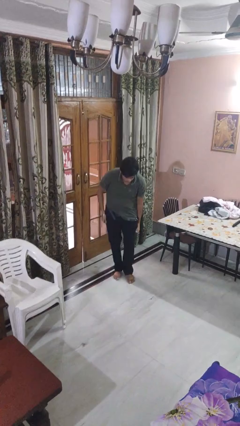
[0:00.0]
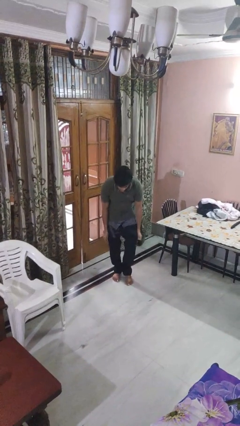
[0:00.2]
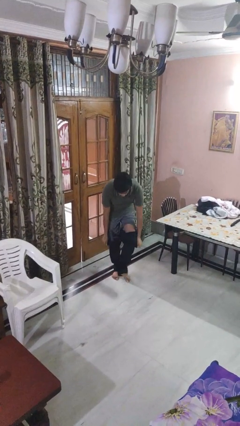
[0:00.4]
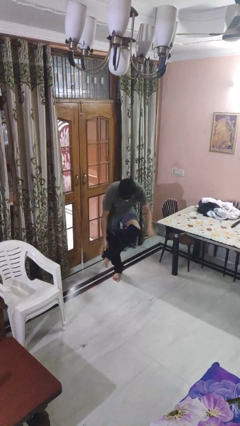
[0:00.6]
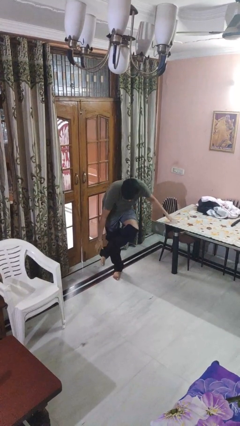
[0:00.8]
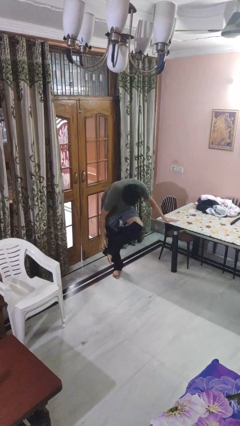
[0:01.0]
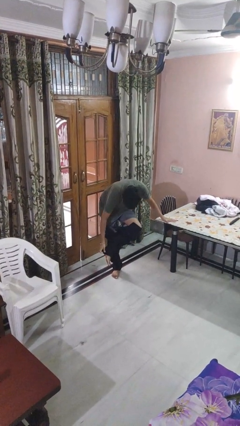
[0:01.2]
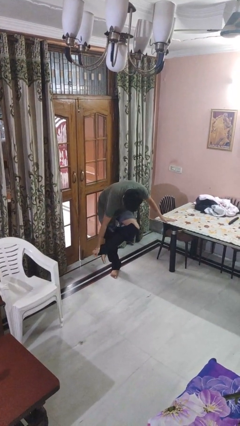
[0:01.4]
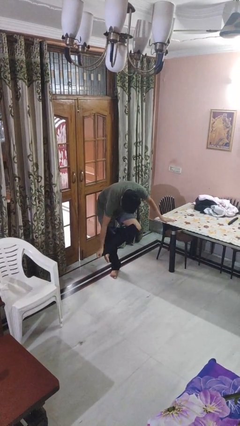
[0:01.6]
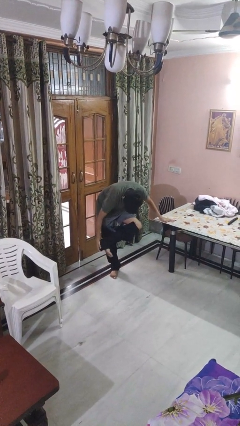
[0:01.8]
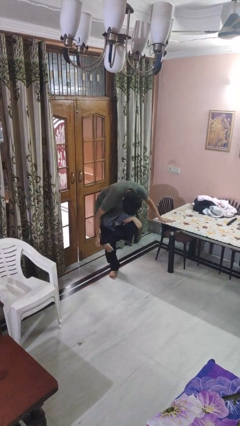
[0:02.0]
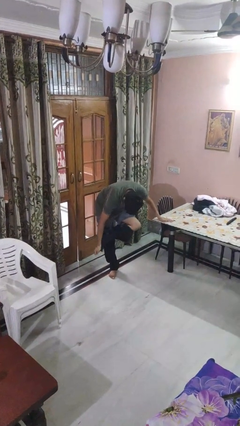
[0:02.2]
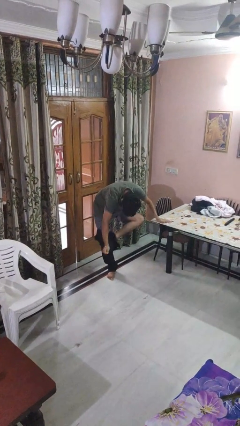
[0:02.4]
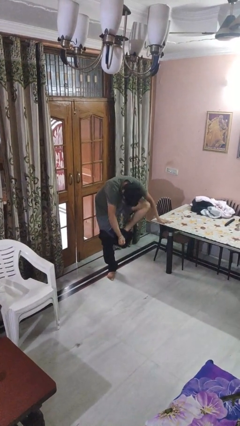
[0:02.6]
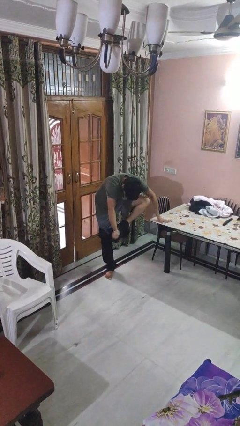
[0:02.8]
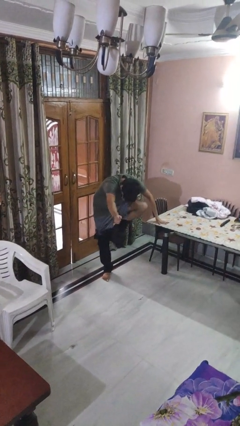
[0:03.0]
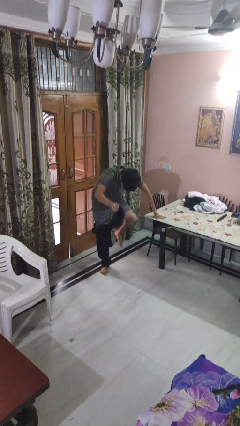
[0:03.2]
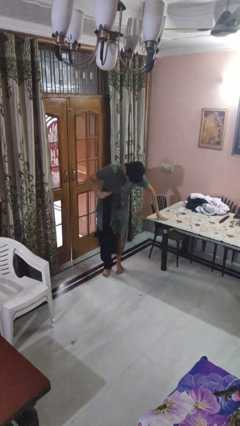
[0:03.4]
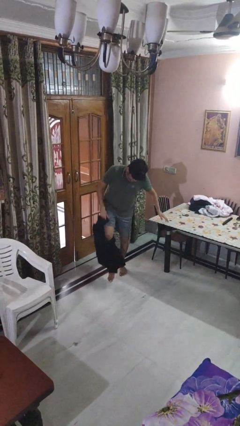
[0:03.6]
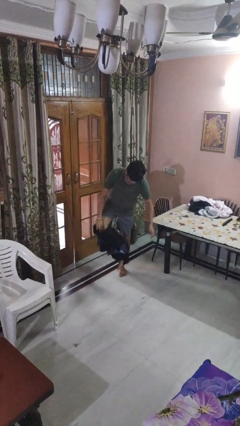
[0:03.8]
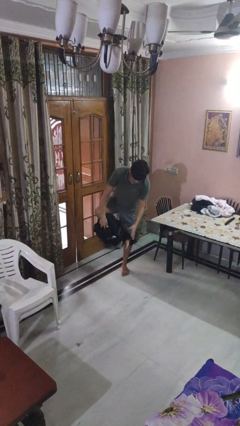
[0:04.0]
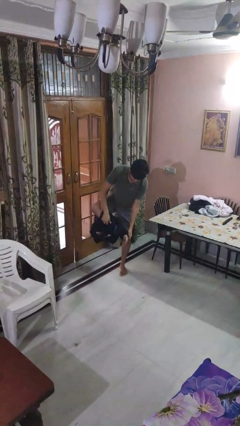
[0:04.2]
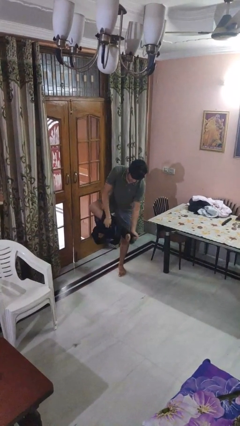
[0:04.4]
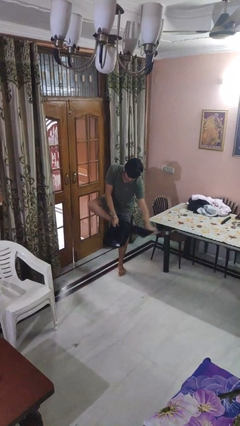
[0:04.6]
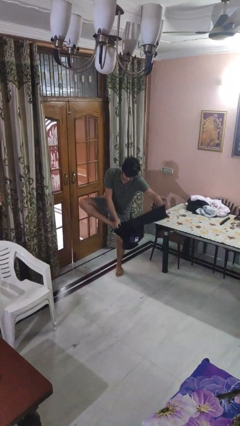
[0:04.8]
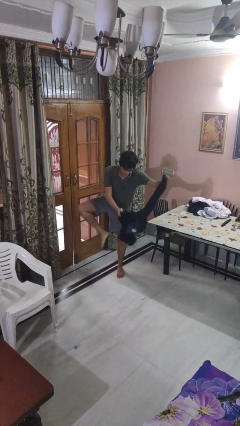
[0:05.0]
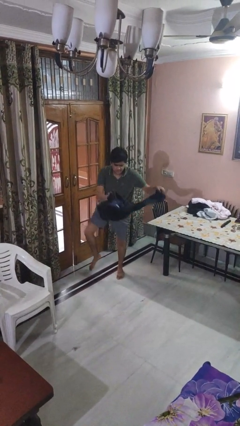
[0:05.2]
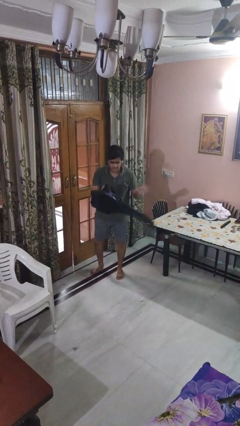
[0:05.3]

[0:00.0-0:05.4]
person takes off pants

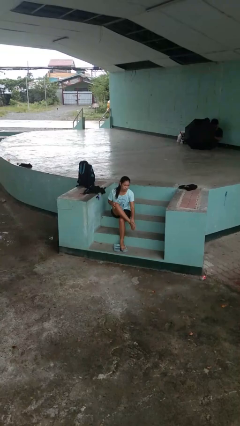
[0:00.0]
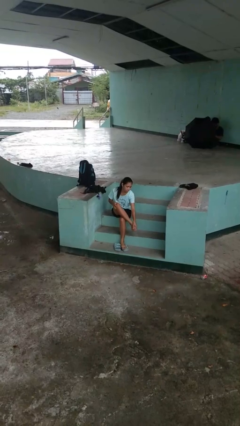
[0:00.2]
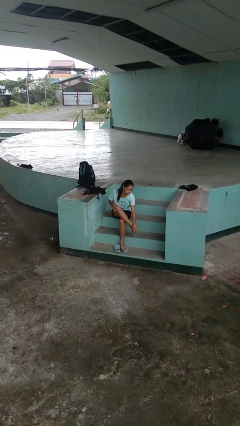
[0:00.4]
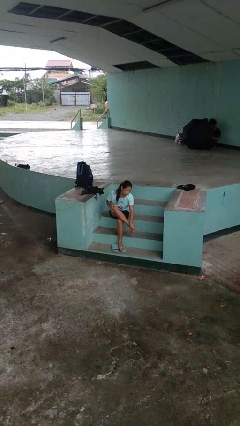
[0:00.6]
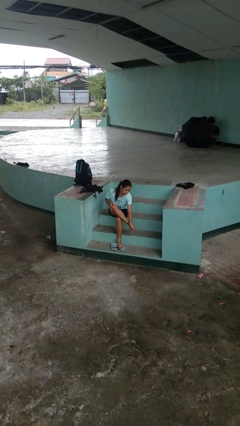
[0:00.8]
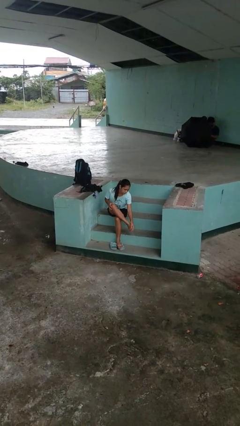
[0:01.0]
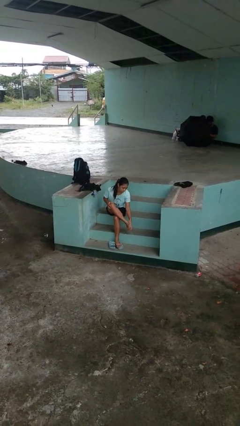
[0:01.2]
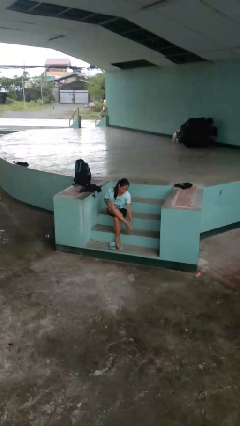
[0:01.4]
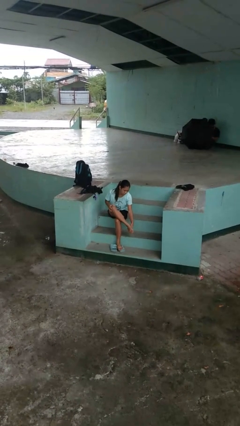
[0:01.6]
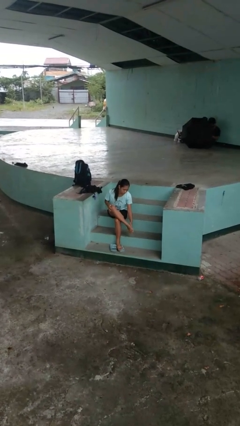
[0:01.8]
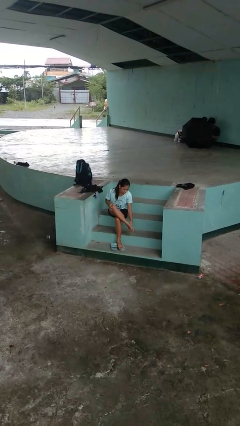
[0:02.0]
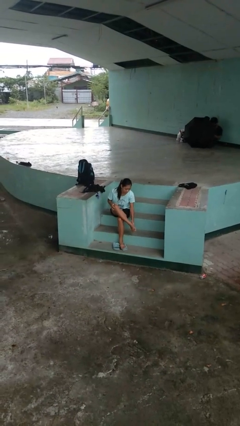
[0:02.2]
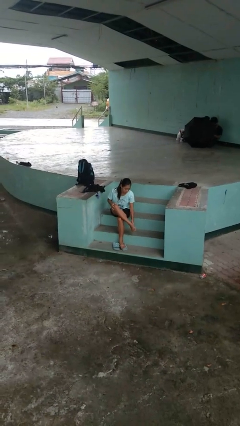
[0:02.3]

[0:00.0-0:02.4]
person rubs foot

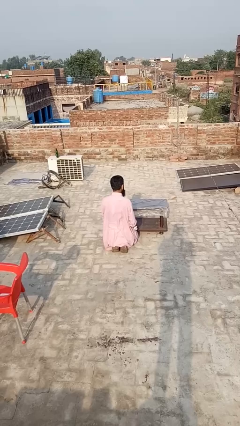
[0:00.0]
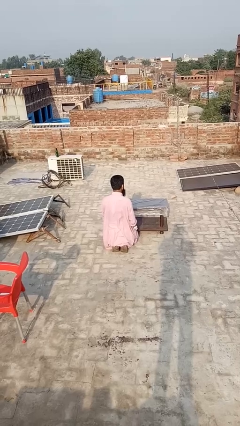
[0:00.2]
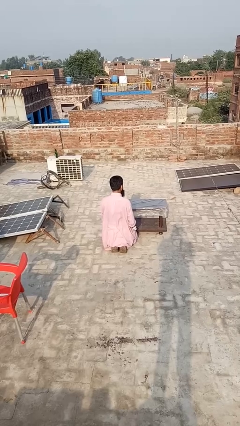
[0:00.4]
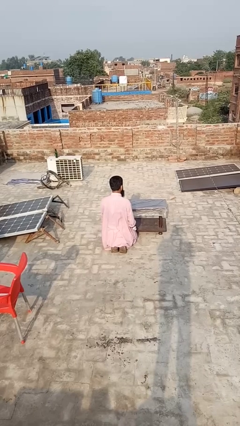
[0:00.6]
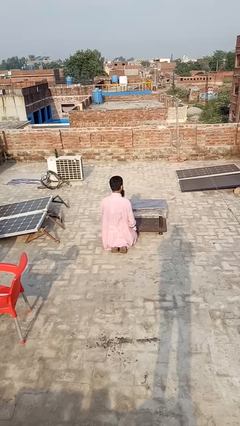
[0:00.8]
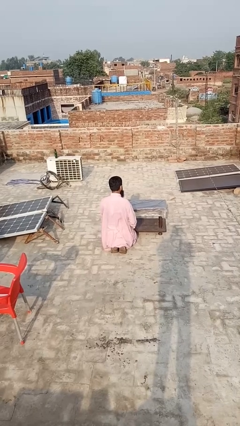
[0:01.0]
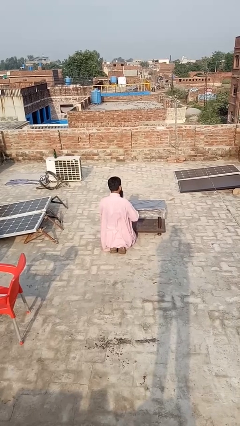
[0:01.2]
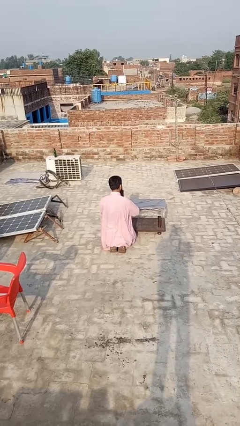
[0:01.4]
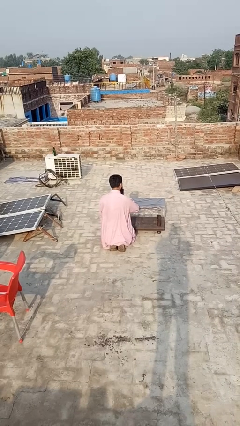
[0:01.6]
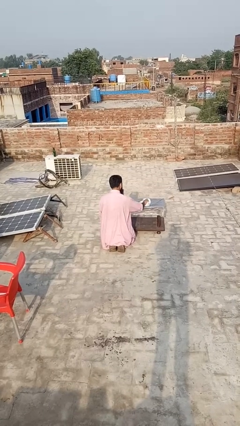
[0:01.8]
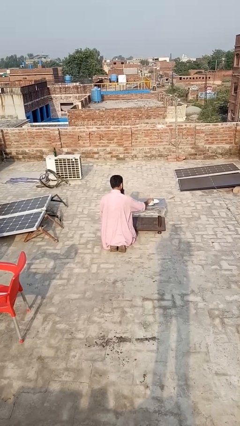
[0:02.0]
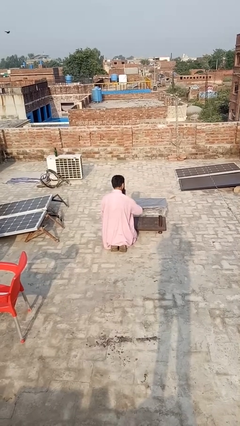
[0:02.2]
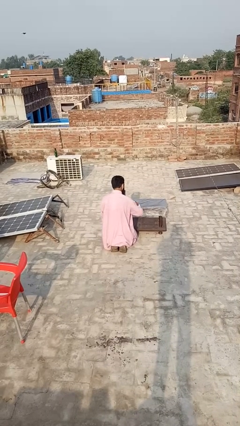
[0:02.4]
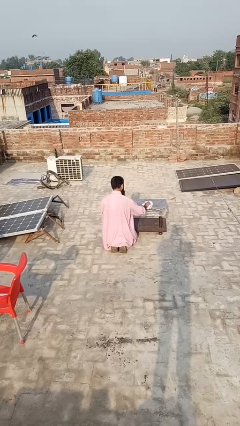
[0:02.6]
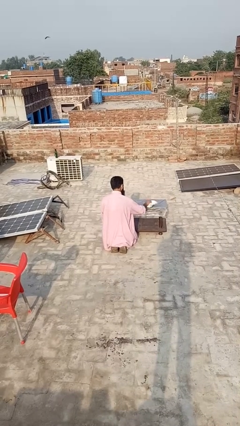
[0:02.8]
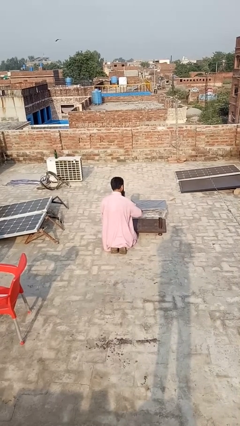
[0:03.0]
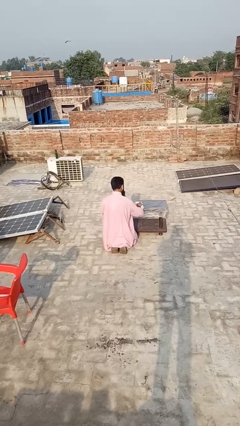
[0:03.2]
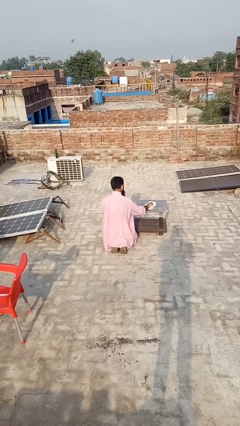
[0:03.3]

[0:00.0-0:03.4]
person cleans table with rag

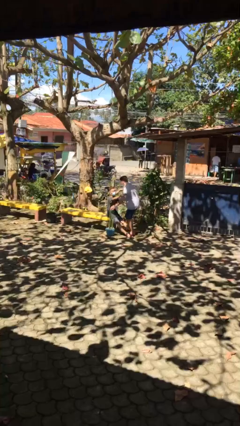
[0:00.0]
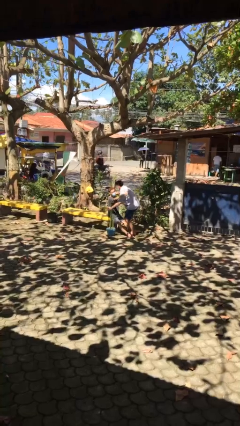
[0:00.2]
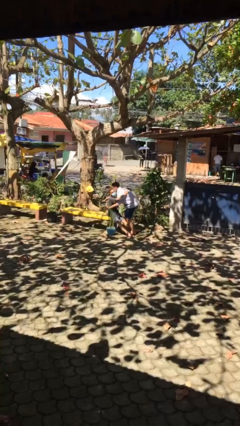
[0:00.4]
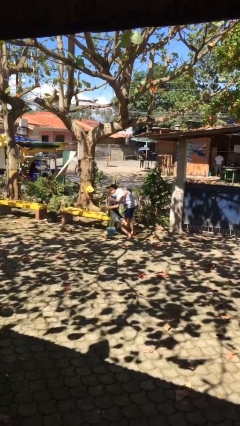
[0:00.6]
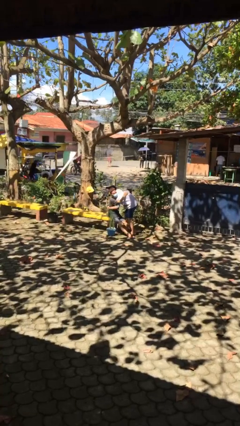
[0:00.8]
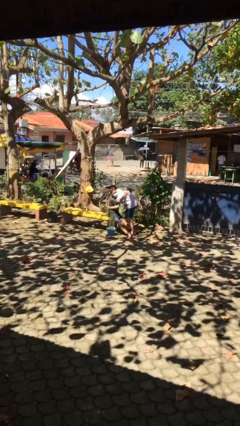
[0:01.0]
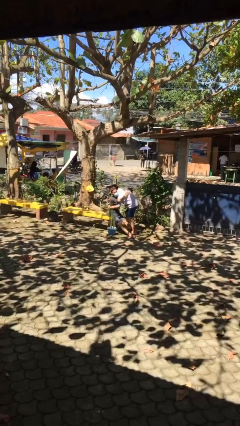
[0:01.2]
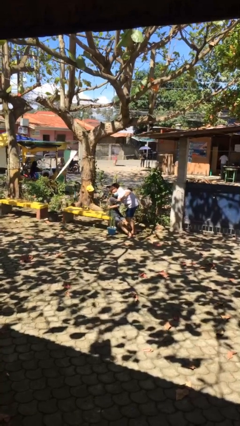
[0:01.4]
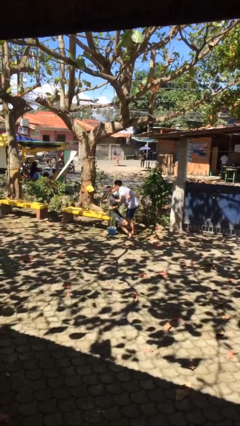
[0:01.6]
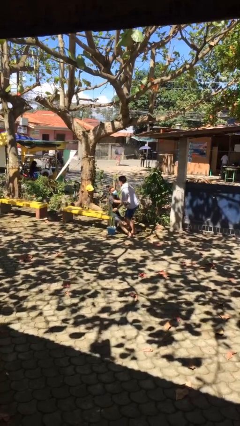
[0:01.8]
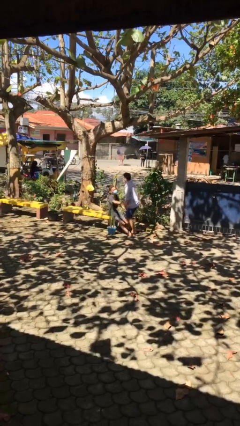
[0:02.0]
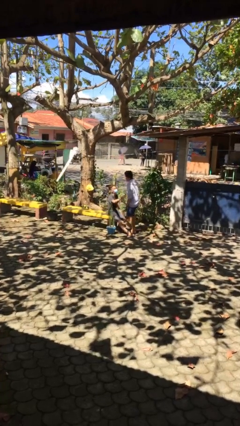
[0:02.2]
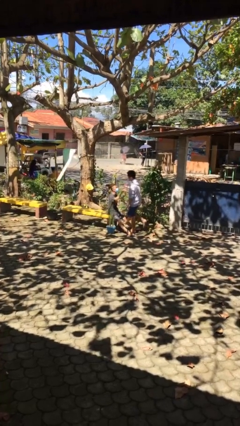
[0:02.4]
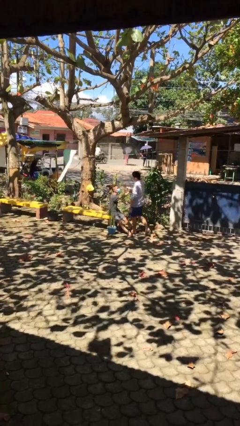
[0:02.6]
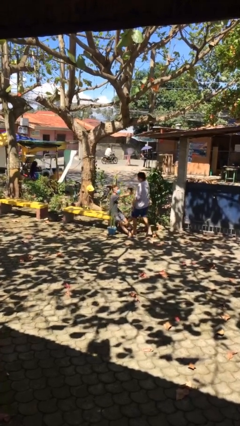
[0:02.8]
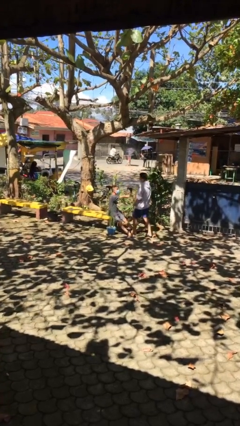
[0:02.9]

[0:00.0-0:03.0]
person embraces person

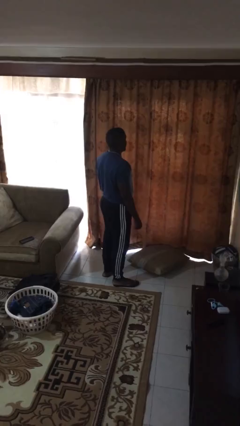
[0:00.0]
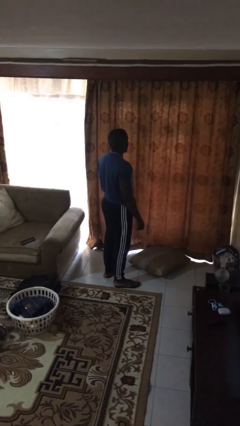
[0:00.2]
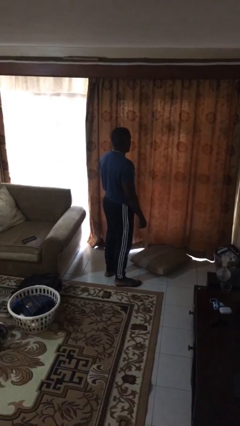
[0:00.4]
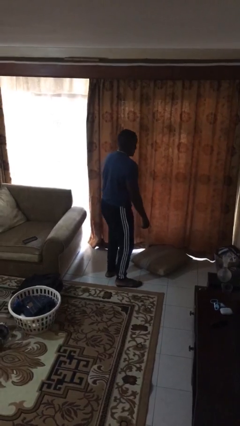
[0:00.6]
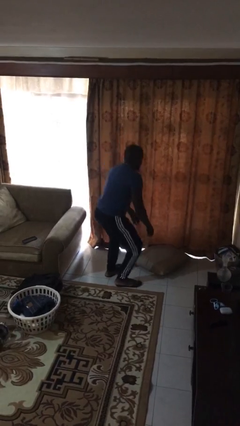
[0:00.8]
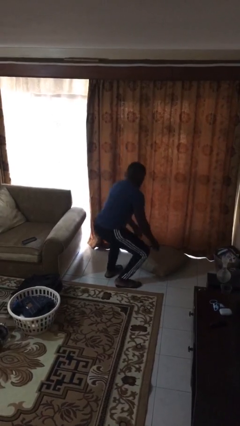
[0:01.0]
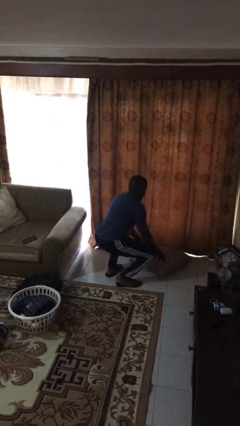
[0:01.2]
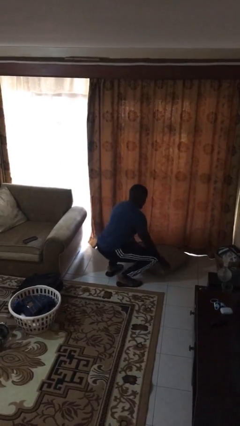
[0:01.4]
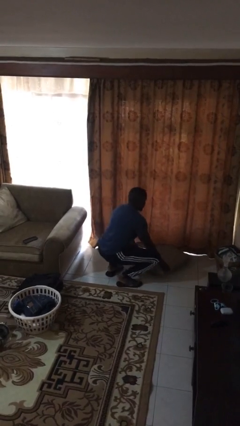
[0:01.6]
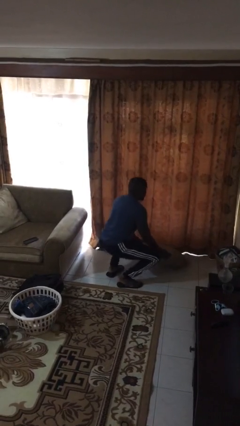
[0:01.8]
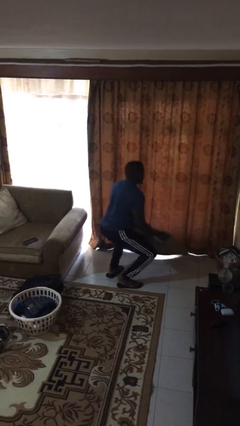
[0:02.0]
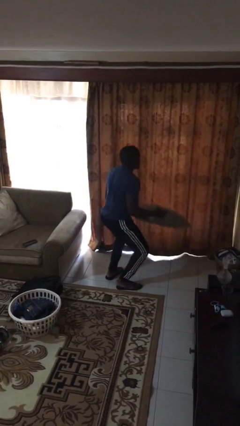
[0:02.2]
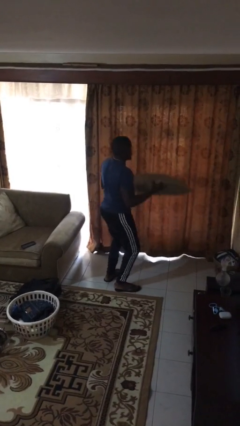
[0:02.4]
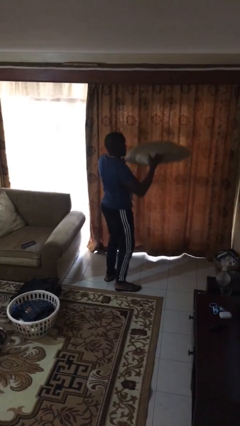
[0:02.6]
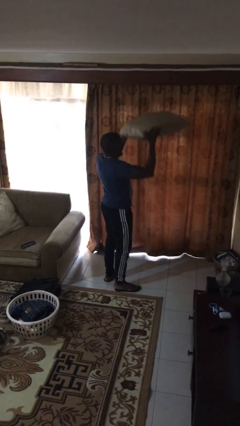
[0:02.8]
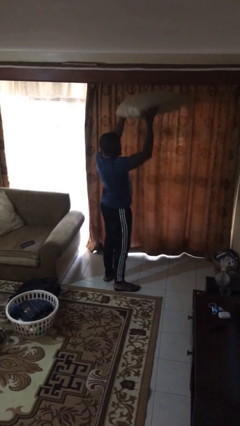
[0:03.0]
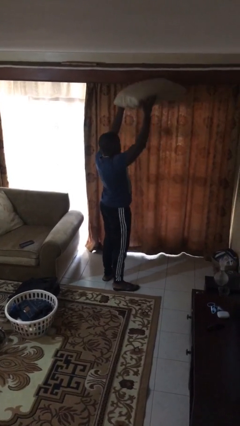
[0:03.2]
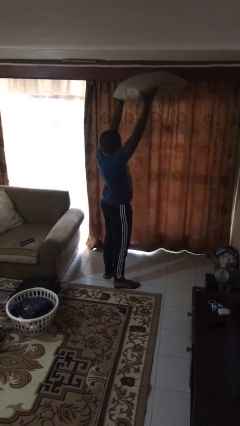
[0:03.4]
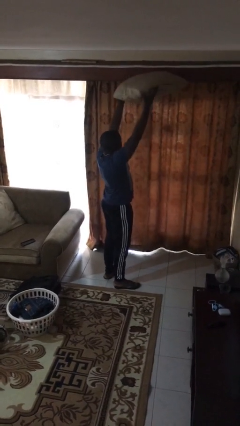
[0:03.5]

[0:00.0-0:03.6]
person picks up object from floor
